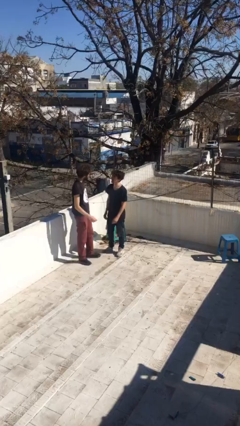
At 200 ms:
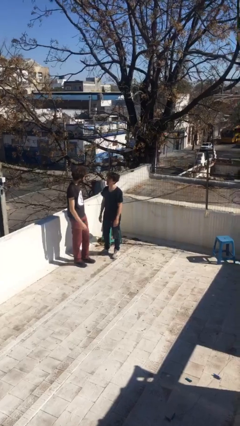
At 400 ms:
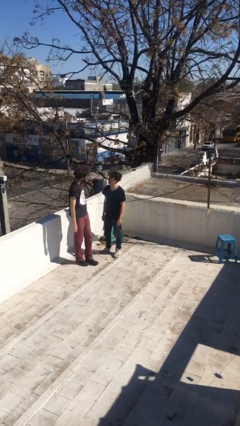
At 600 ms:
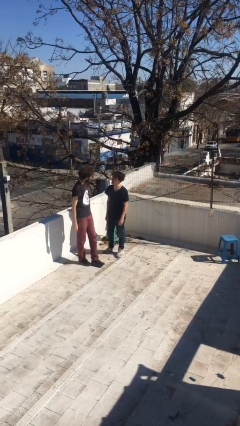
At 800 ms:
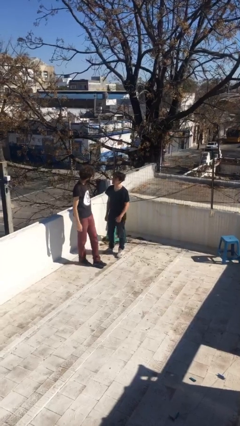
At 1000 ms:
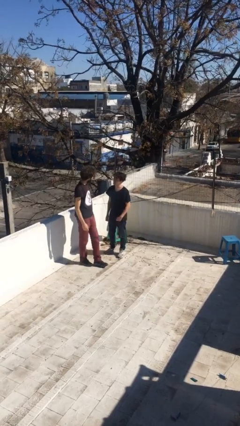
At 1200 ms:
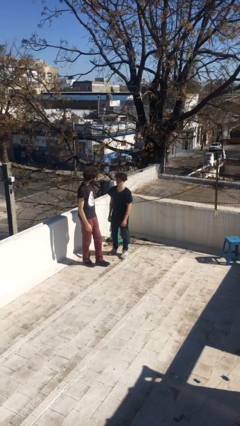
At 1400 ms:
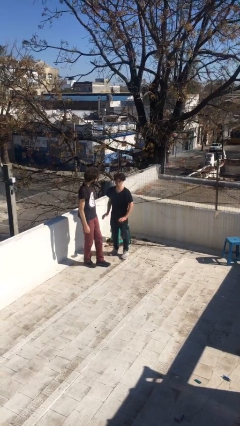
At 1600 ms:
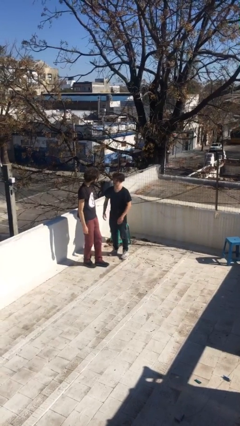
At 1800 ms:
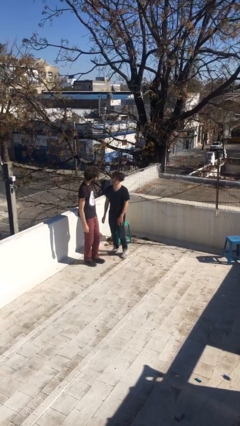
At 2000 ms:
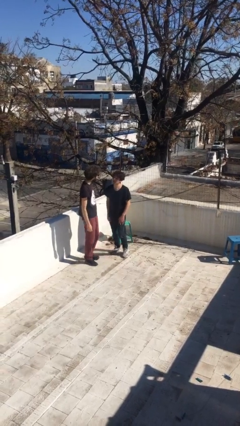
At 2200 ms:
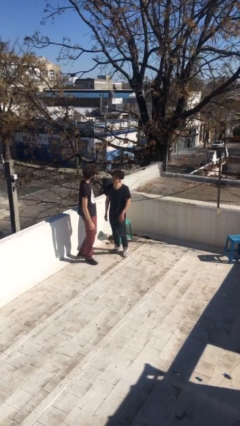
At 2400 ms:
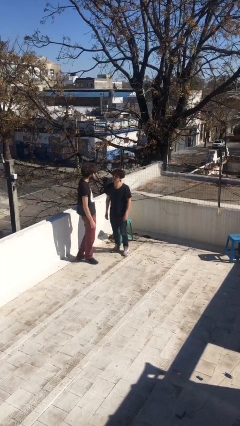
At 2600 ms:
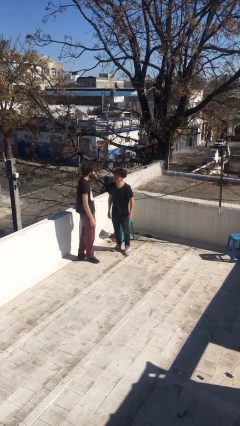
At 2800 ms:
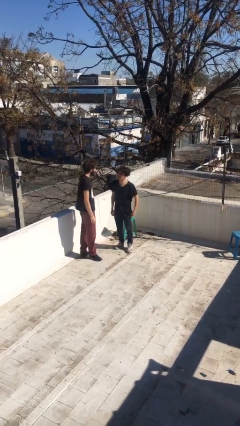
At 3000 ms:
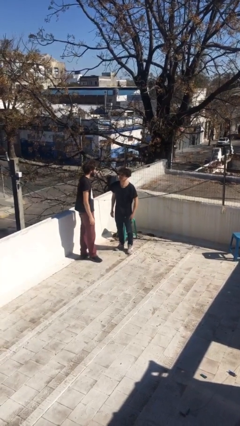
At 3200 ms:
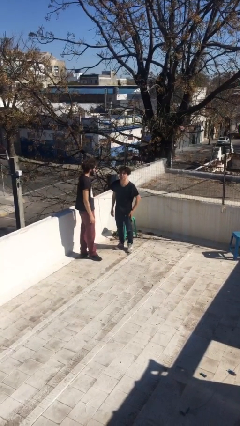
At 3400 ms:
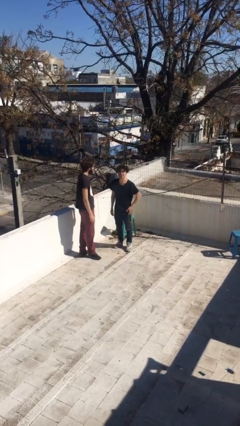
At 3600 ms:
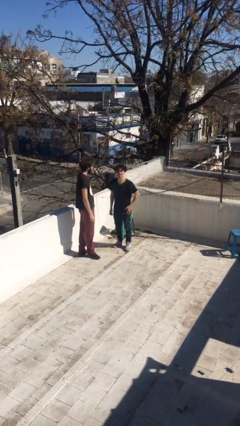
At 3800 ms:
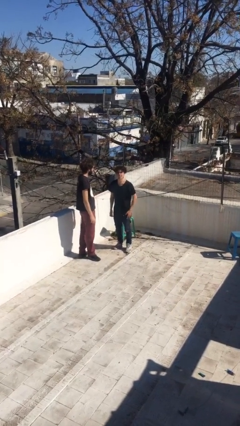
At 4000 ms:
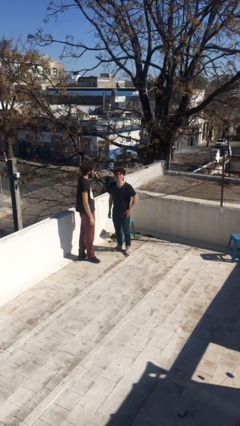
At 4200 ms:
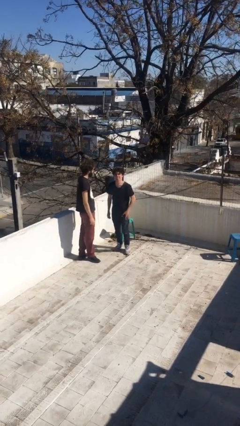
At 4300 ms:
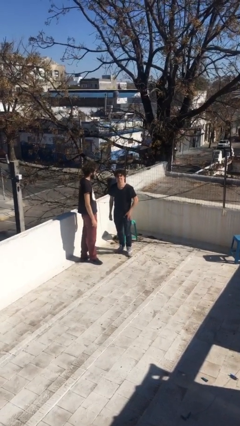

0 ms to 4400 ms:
person talks to person

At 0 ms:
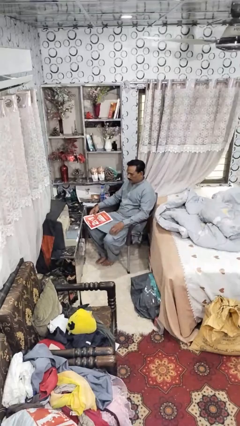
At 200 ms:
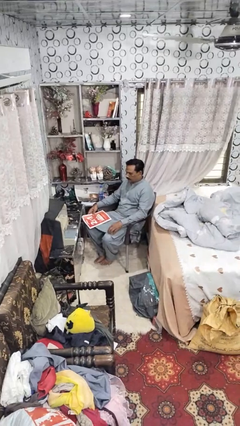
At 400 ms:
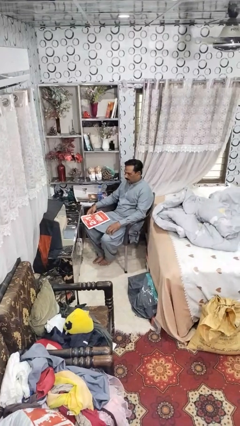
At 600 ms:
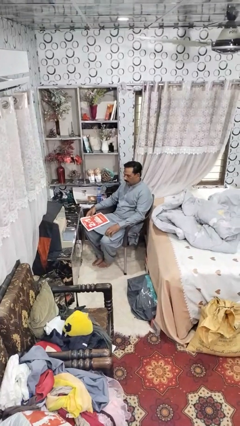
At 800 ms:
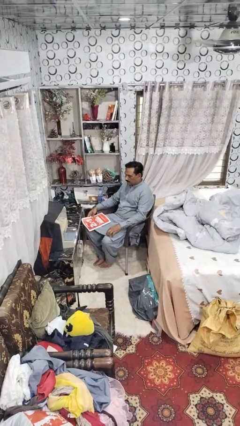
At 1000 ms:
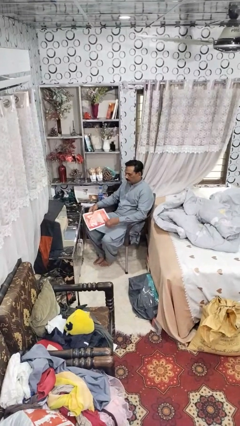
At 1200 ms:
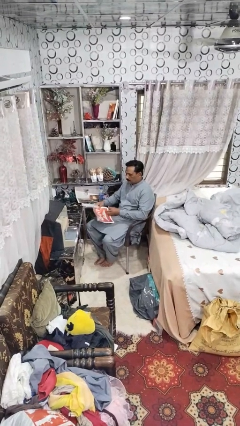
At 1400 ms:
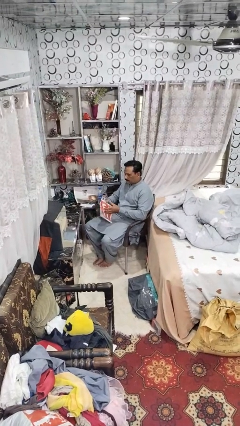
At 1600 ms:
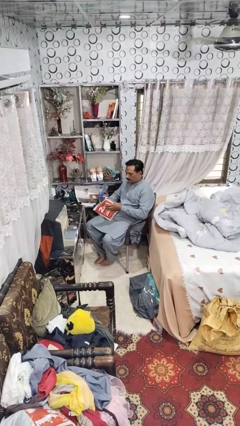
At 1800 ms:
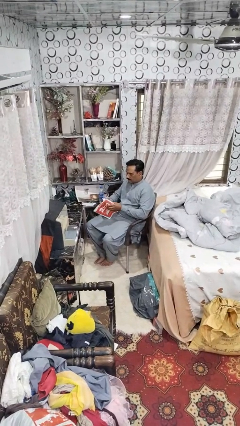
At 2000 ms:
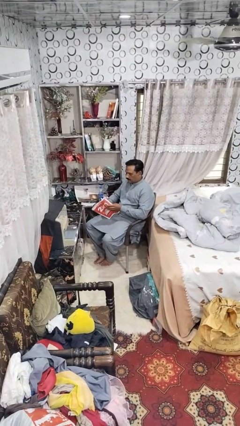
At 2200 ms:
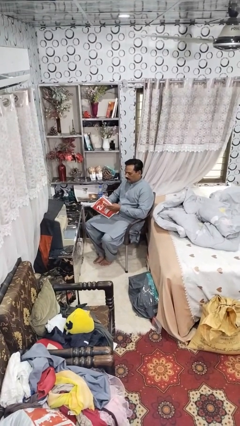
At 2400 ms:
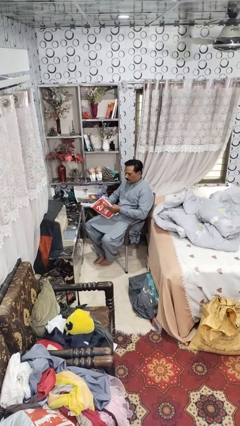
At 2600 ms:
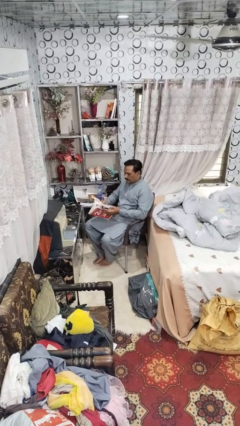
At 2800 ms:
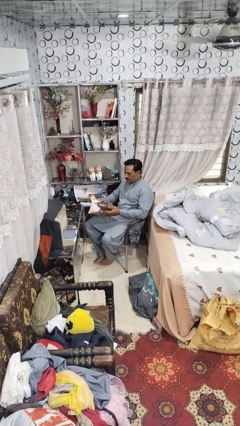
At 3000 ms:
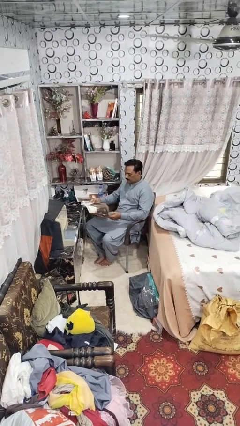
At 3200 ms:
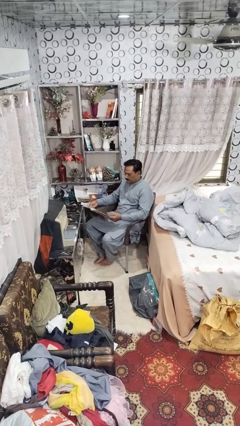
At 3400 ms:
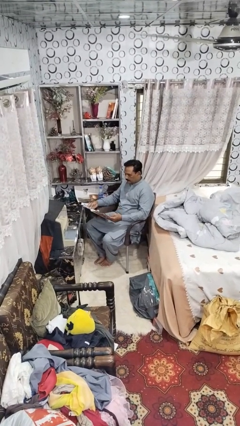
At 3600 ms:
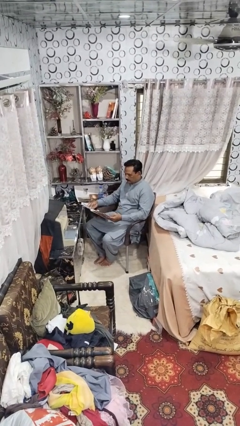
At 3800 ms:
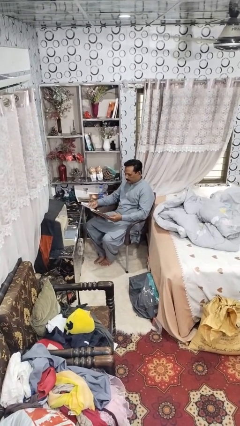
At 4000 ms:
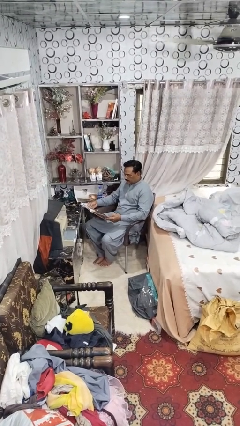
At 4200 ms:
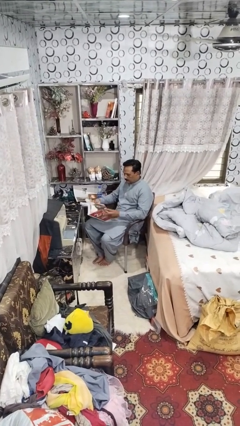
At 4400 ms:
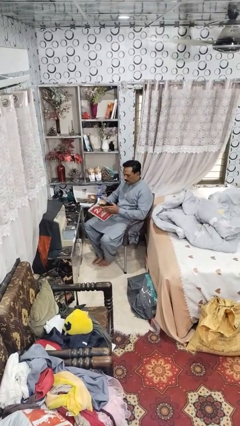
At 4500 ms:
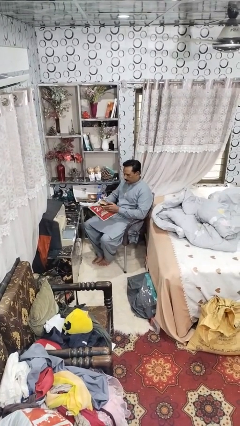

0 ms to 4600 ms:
person reads magazine

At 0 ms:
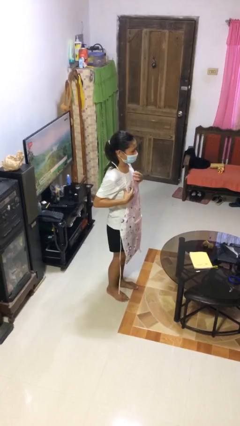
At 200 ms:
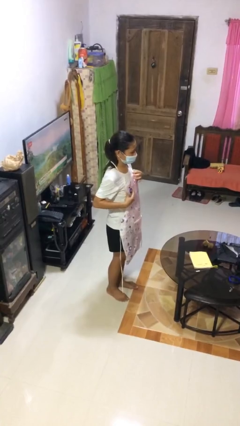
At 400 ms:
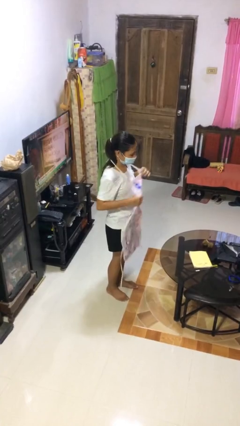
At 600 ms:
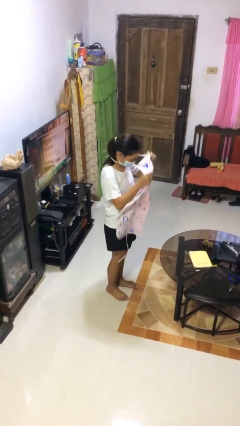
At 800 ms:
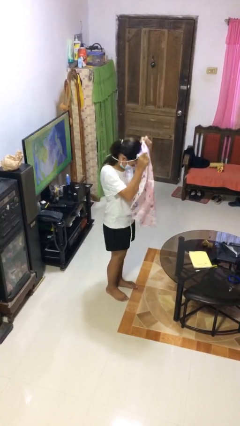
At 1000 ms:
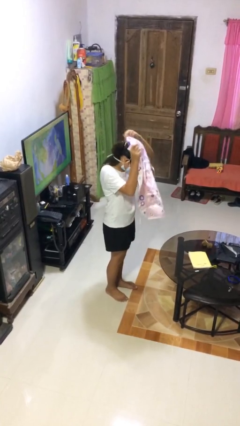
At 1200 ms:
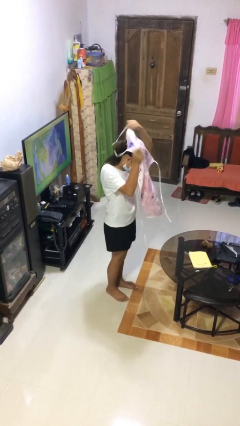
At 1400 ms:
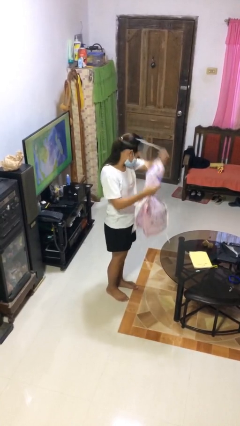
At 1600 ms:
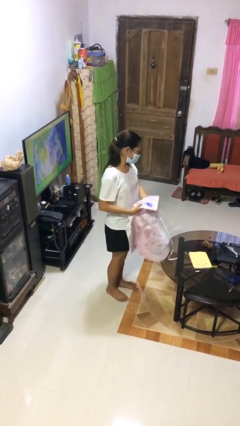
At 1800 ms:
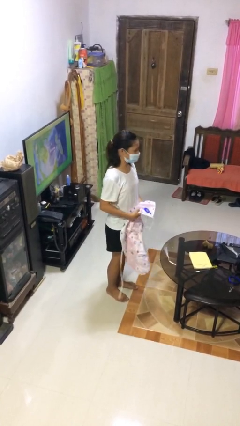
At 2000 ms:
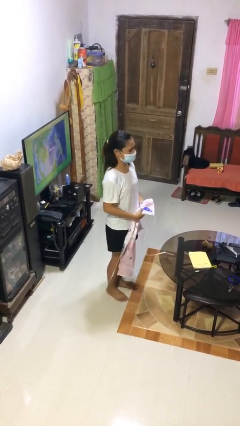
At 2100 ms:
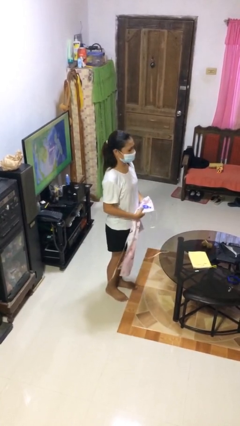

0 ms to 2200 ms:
person takes off apron

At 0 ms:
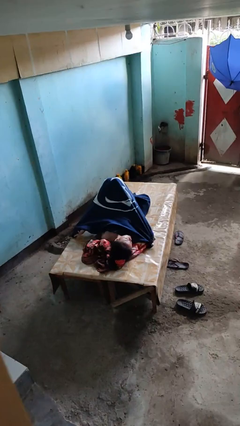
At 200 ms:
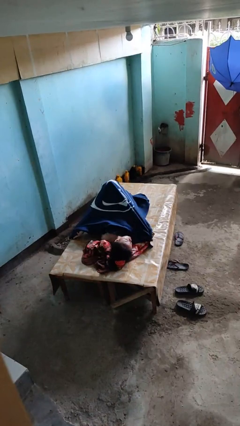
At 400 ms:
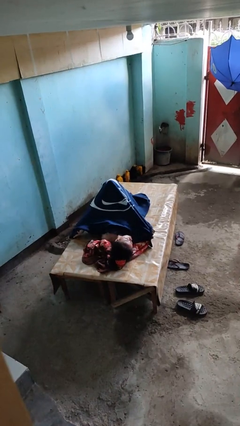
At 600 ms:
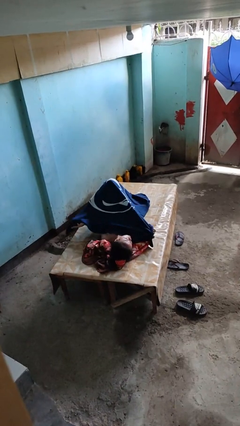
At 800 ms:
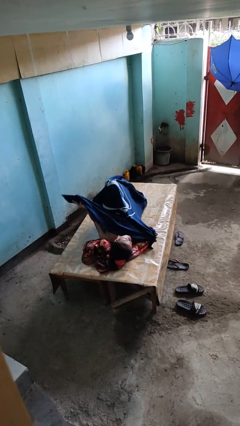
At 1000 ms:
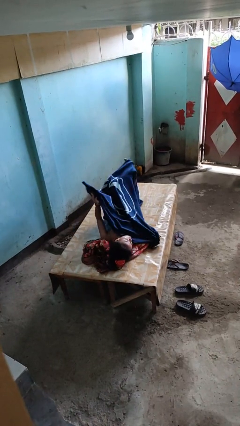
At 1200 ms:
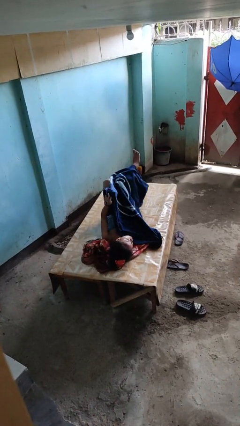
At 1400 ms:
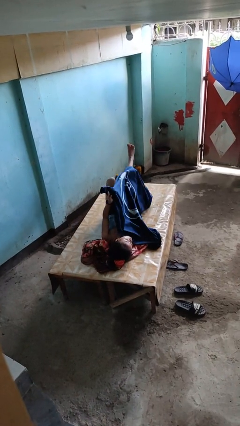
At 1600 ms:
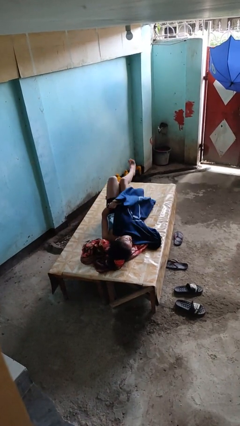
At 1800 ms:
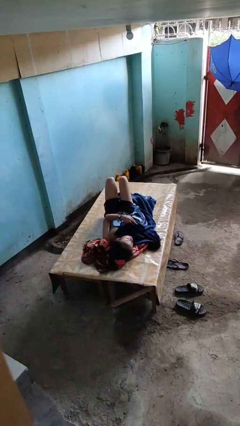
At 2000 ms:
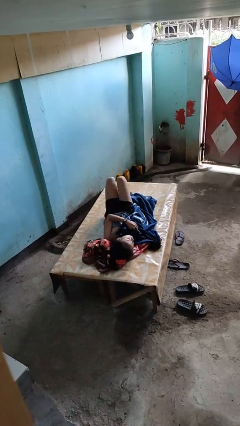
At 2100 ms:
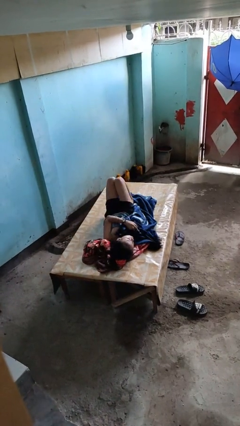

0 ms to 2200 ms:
person uncovers with bedsheets

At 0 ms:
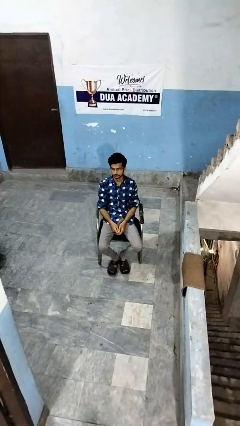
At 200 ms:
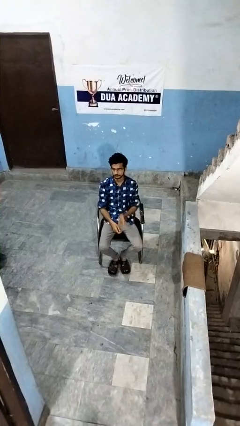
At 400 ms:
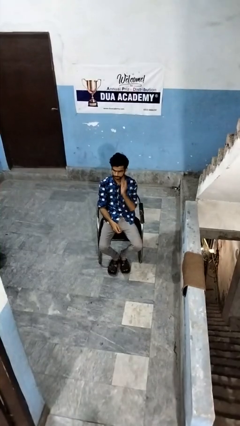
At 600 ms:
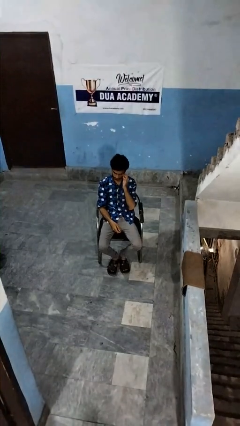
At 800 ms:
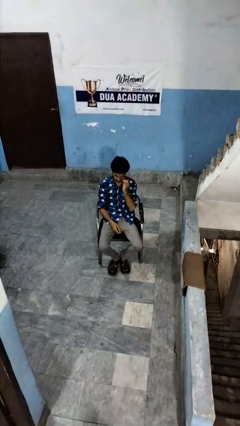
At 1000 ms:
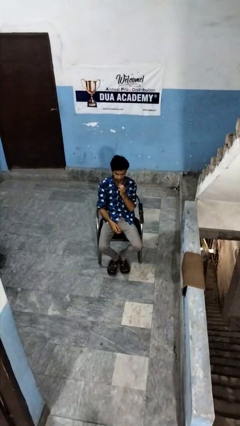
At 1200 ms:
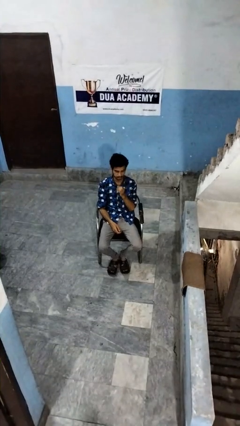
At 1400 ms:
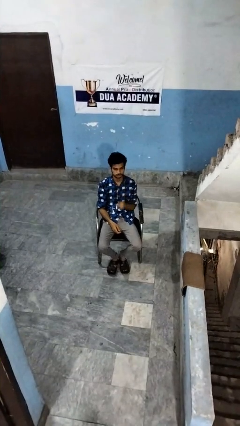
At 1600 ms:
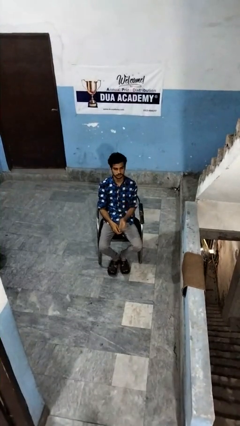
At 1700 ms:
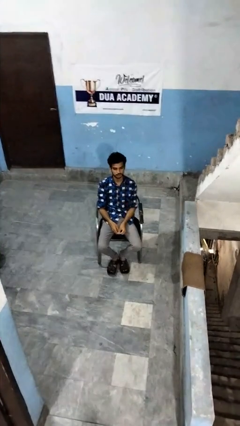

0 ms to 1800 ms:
person takes off glasses

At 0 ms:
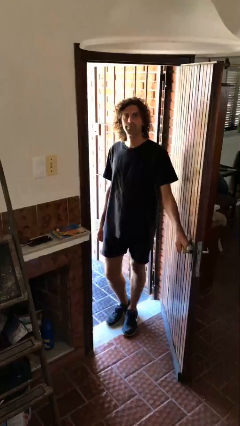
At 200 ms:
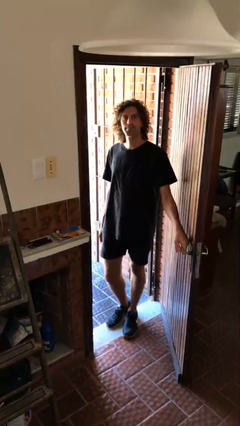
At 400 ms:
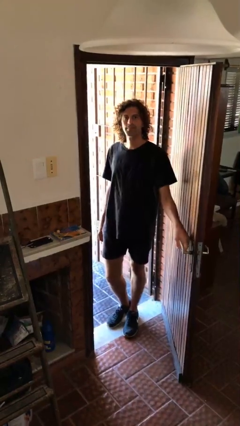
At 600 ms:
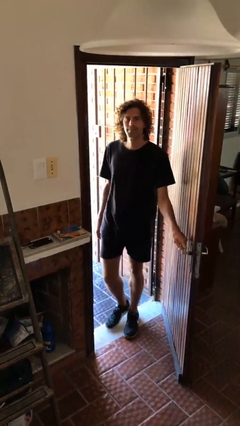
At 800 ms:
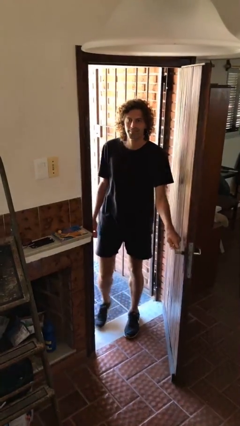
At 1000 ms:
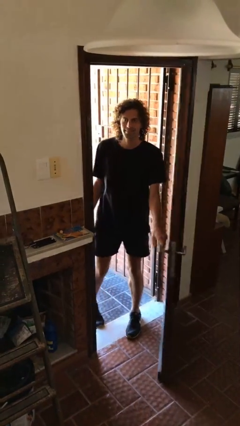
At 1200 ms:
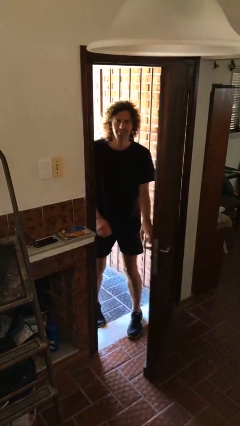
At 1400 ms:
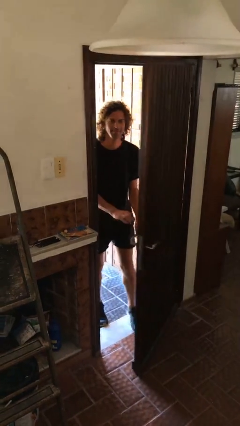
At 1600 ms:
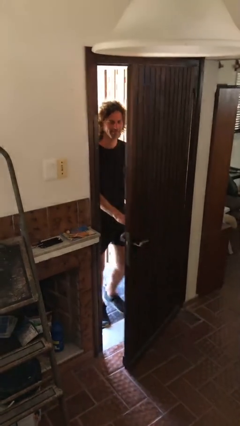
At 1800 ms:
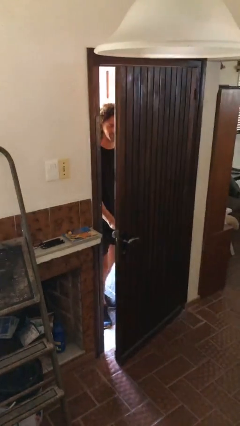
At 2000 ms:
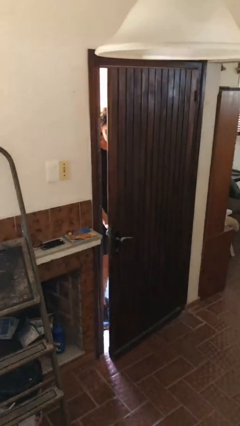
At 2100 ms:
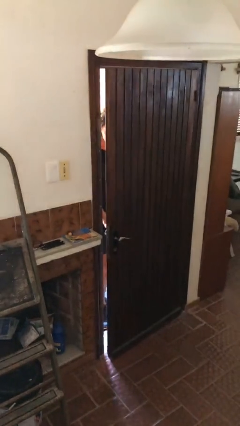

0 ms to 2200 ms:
person closes facility door
